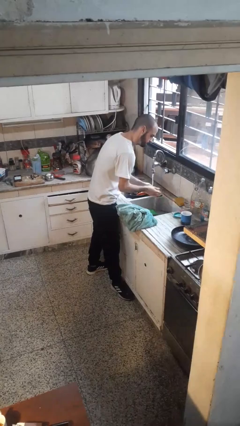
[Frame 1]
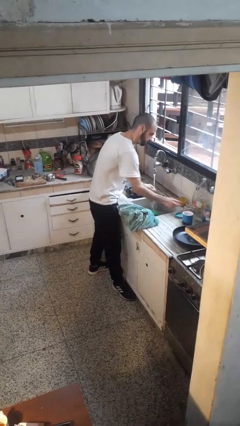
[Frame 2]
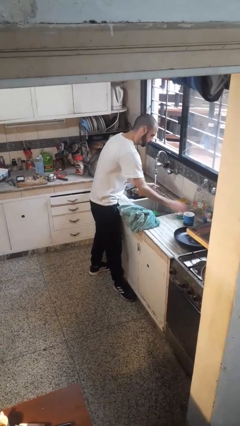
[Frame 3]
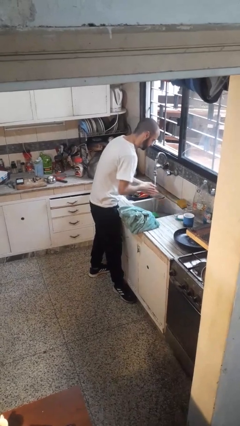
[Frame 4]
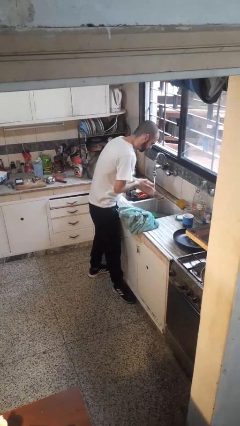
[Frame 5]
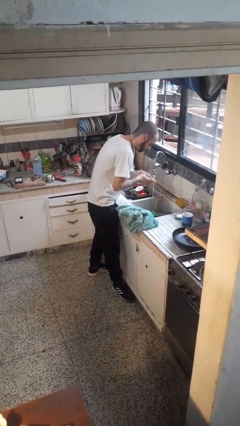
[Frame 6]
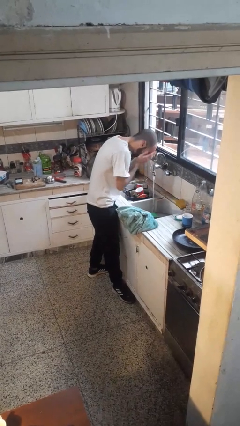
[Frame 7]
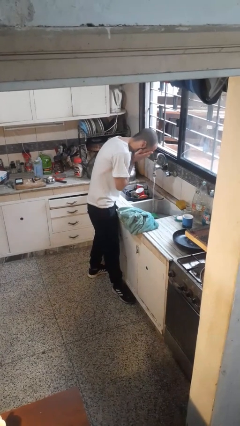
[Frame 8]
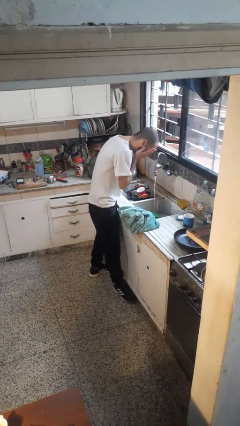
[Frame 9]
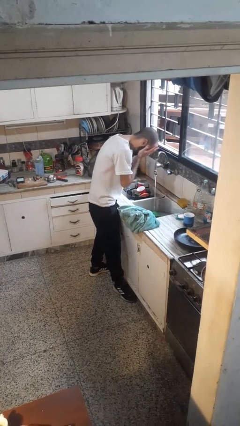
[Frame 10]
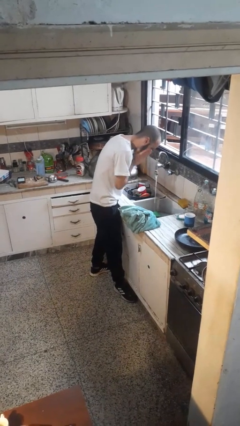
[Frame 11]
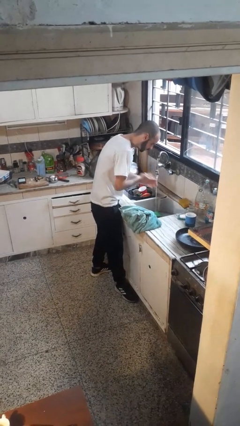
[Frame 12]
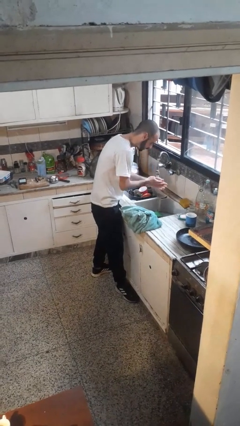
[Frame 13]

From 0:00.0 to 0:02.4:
person washes face

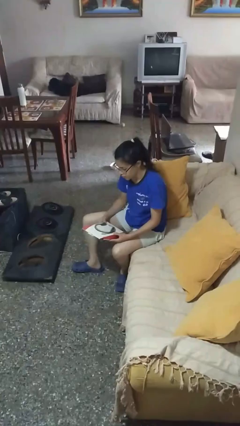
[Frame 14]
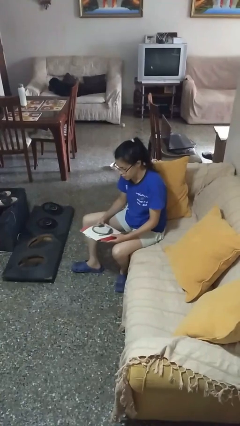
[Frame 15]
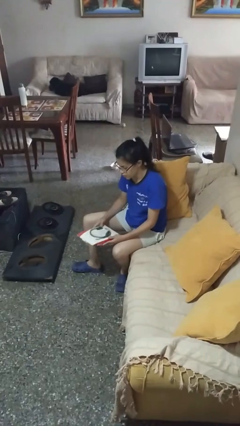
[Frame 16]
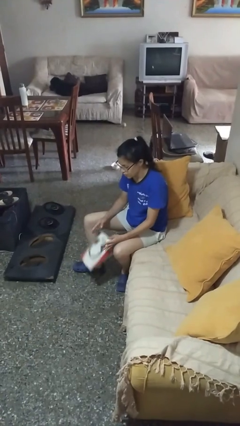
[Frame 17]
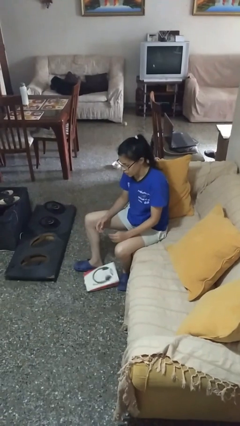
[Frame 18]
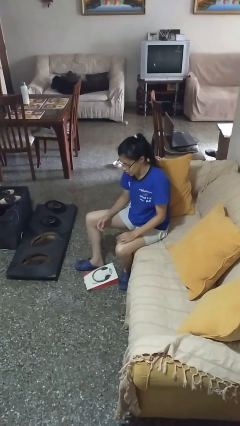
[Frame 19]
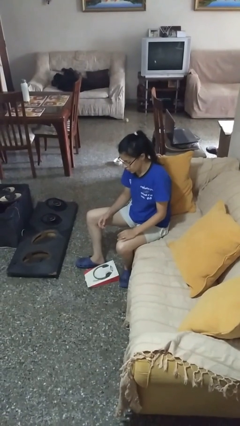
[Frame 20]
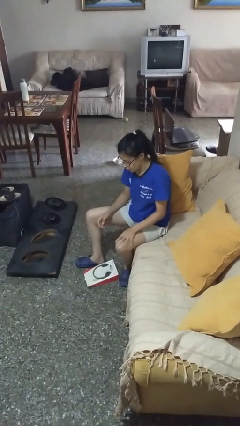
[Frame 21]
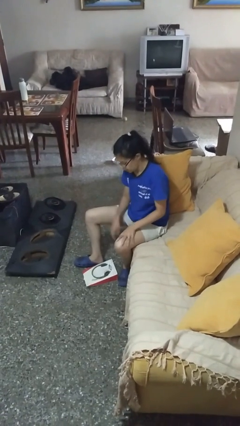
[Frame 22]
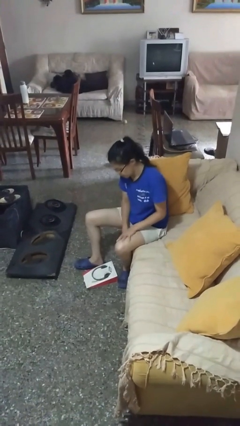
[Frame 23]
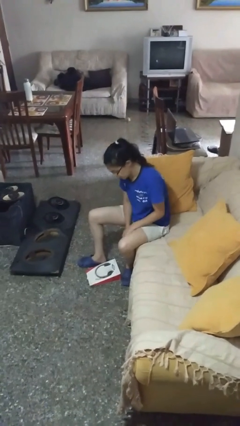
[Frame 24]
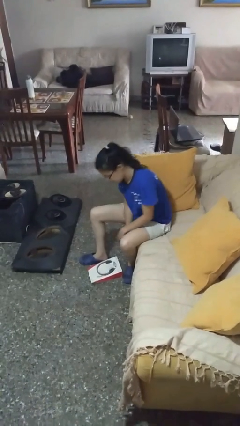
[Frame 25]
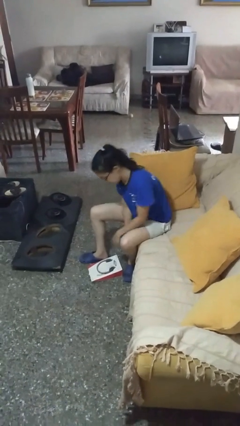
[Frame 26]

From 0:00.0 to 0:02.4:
person drops object

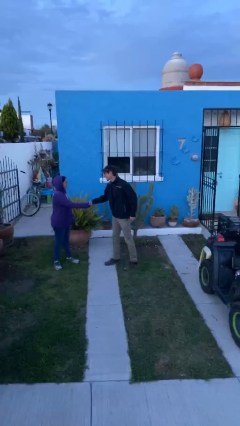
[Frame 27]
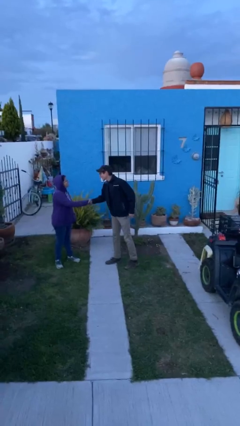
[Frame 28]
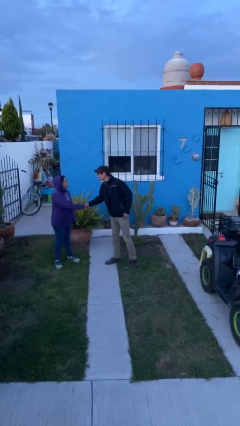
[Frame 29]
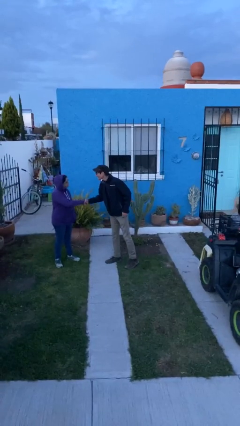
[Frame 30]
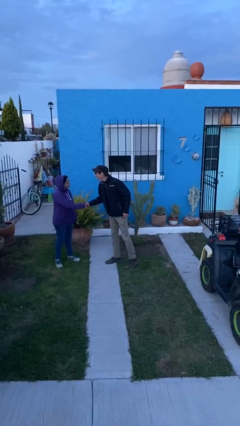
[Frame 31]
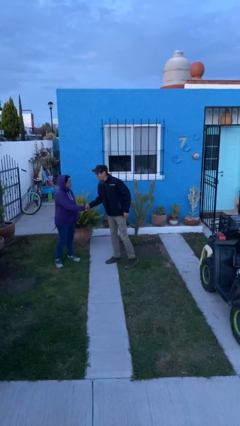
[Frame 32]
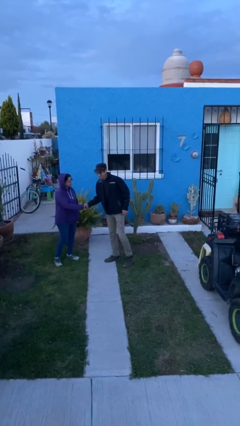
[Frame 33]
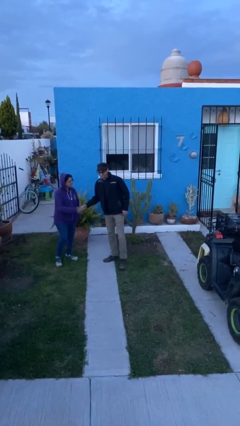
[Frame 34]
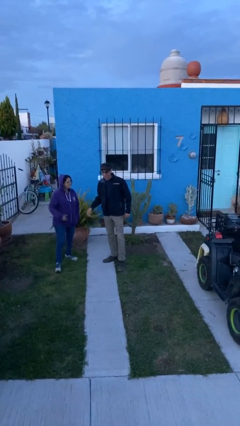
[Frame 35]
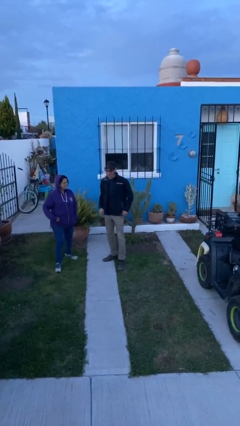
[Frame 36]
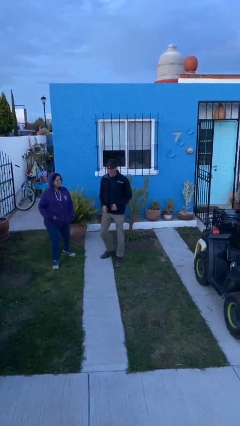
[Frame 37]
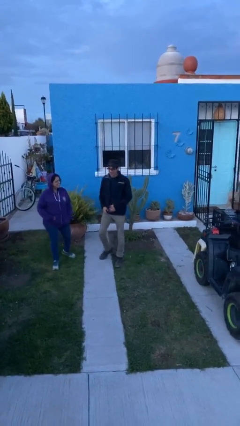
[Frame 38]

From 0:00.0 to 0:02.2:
person shakes hand

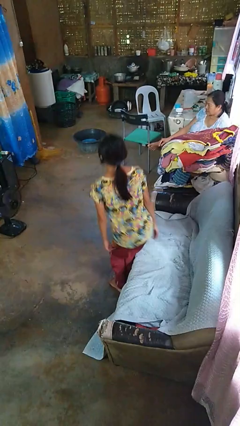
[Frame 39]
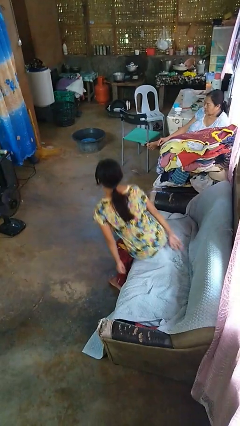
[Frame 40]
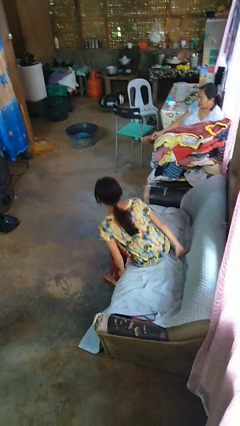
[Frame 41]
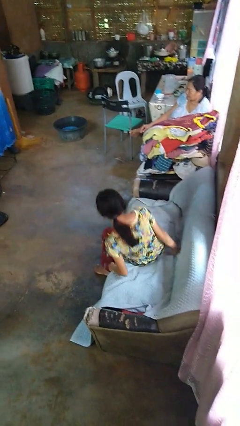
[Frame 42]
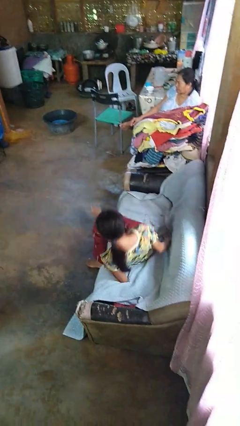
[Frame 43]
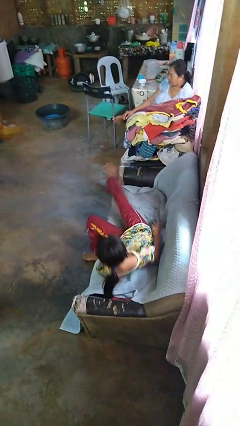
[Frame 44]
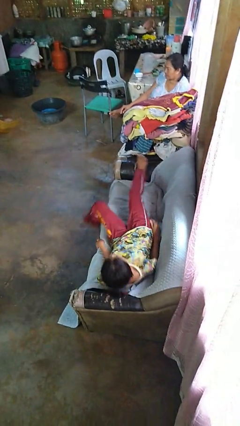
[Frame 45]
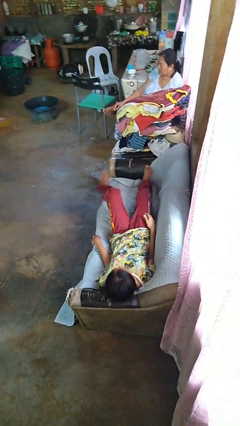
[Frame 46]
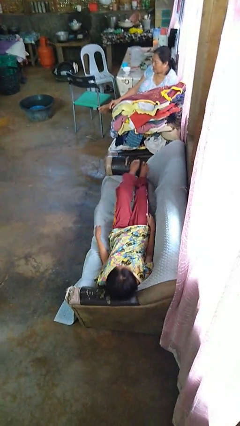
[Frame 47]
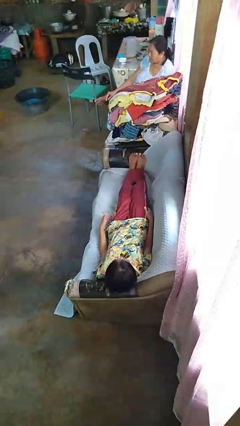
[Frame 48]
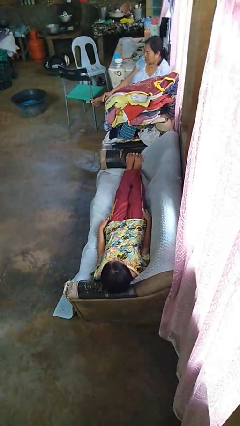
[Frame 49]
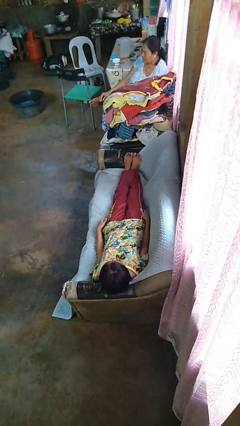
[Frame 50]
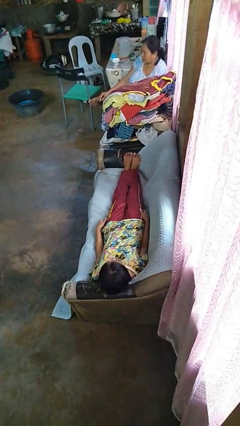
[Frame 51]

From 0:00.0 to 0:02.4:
person lies down on couch

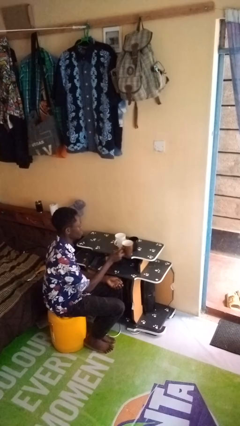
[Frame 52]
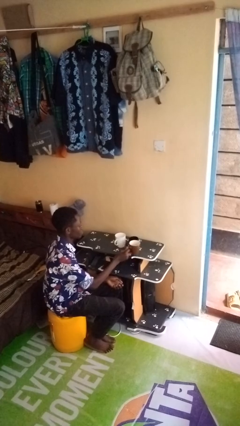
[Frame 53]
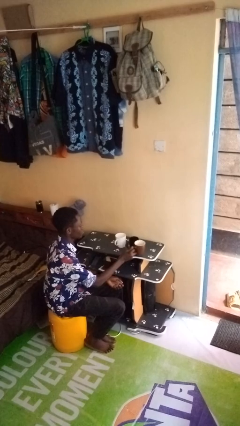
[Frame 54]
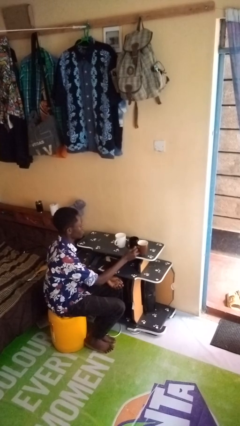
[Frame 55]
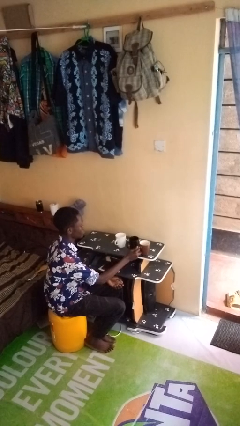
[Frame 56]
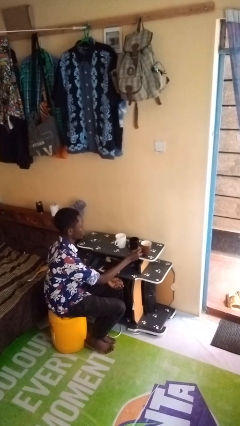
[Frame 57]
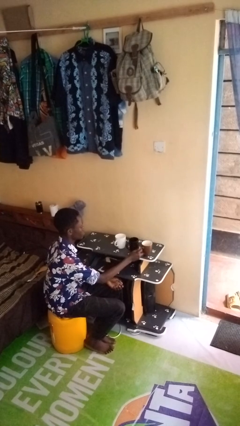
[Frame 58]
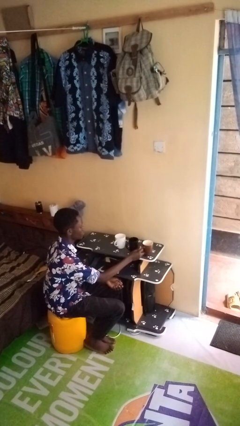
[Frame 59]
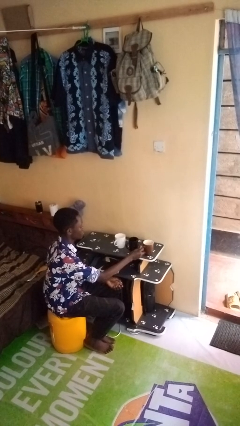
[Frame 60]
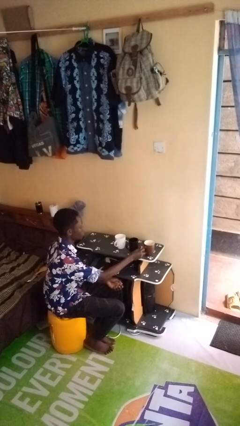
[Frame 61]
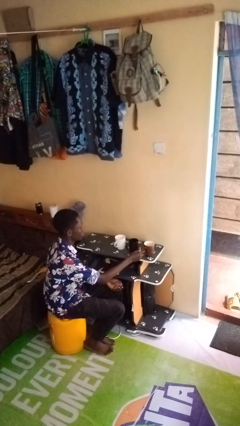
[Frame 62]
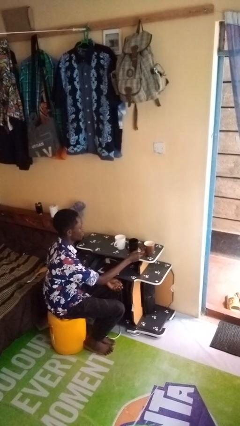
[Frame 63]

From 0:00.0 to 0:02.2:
person puts down object on table

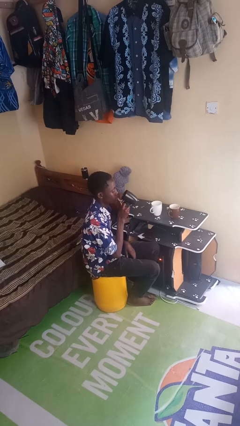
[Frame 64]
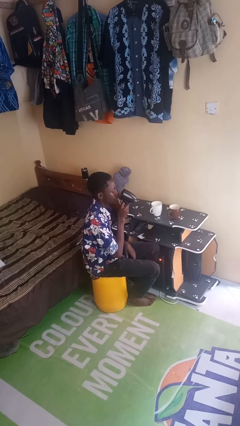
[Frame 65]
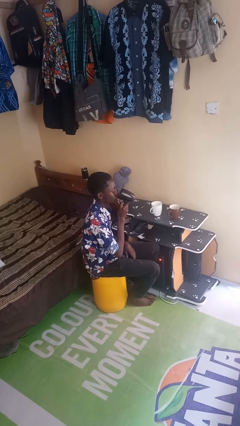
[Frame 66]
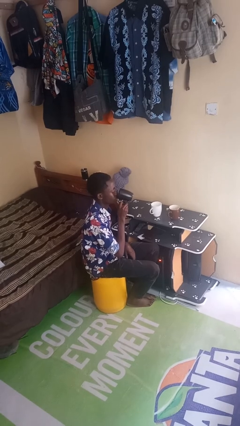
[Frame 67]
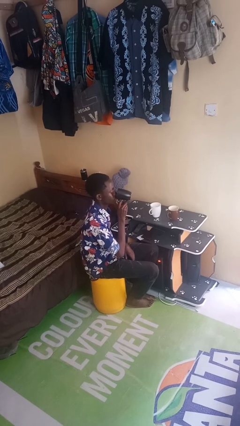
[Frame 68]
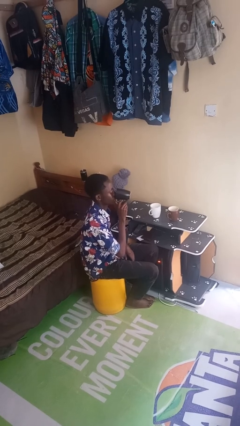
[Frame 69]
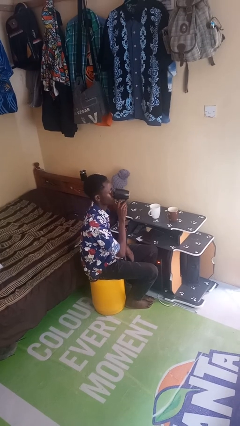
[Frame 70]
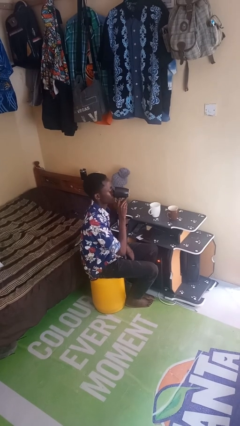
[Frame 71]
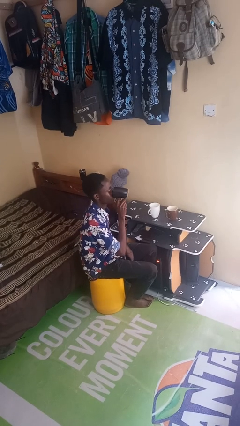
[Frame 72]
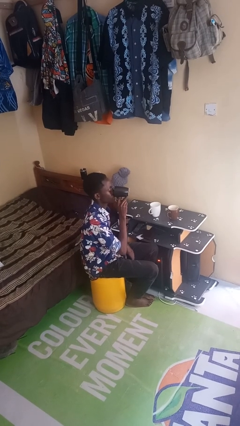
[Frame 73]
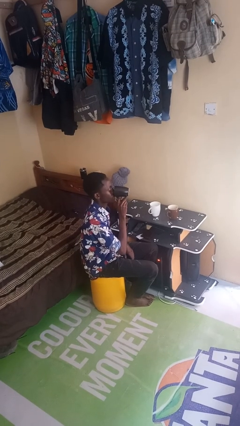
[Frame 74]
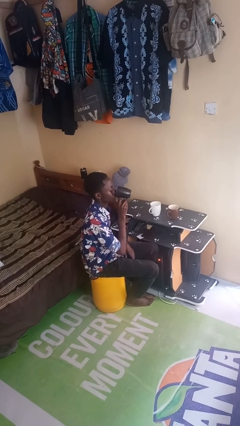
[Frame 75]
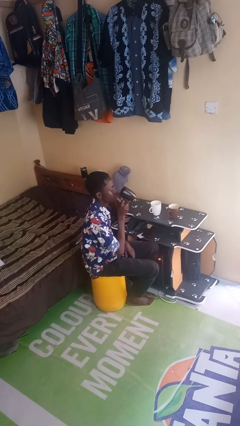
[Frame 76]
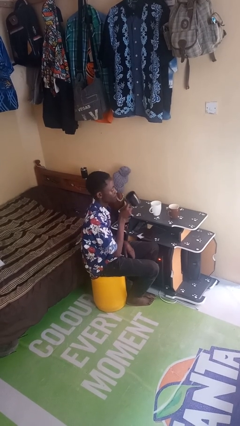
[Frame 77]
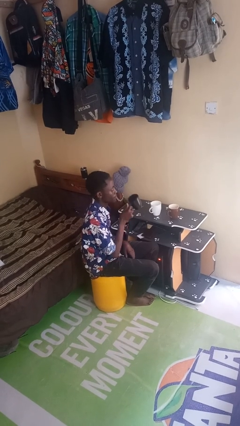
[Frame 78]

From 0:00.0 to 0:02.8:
person drinks from shotglass

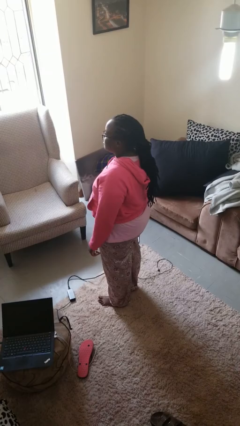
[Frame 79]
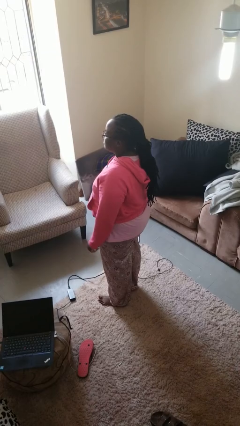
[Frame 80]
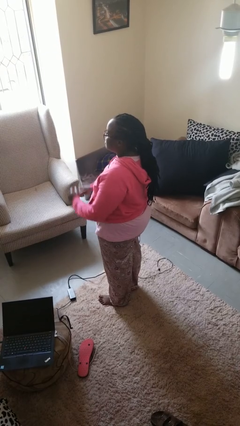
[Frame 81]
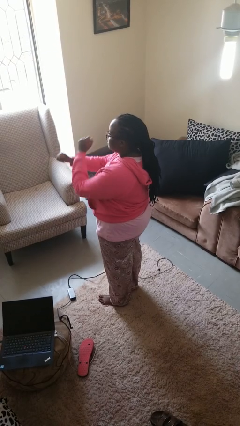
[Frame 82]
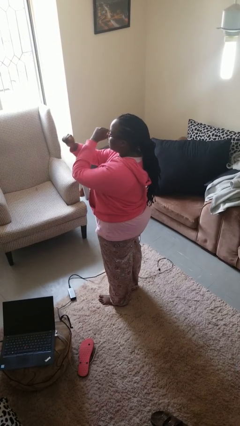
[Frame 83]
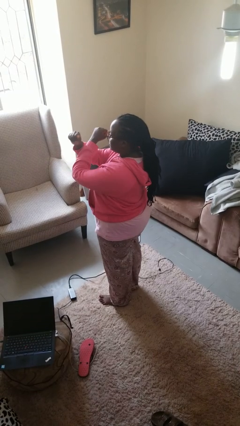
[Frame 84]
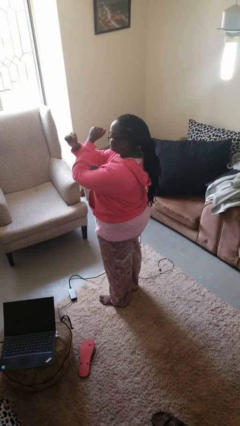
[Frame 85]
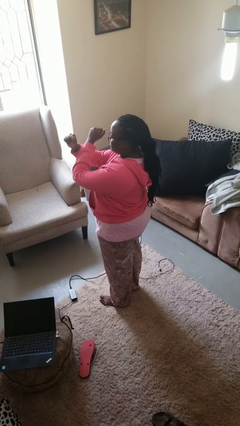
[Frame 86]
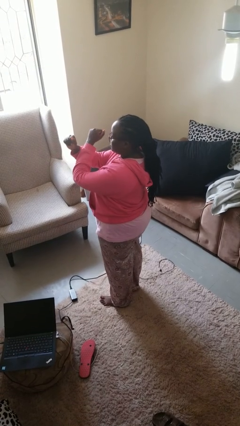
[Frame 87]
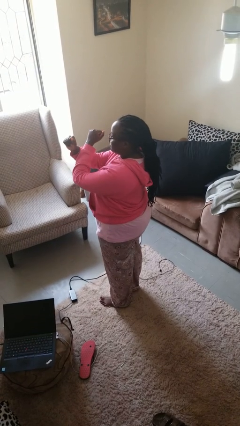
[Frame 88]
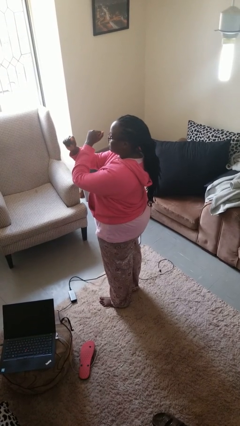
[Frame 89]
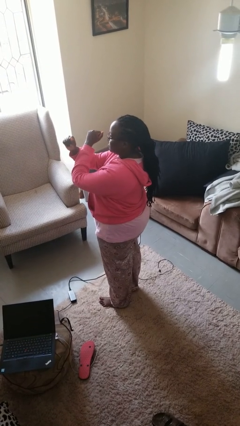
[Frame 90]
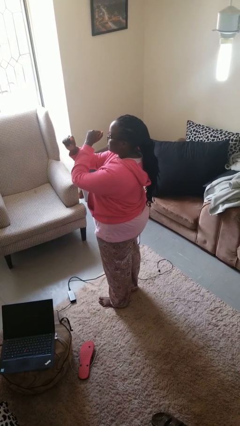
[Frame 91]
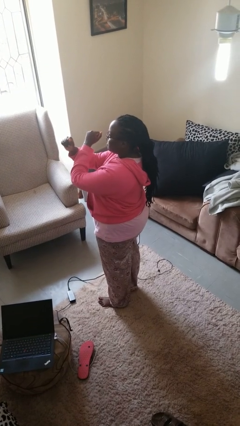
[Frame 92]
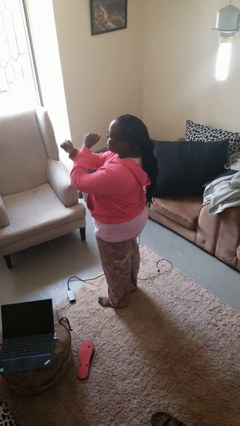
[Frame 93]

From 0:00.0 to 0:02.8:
person gestures arms x
